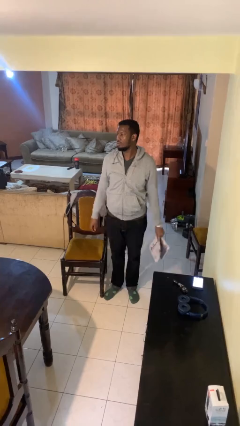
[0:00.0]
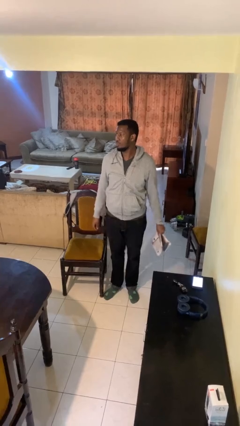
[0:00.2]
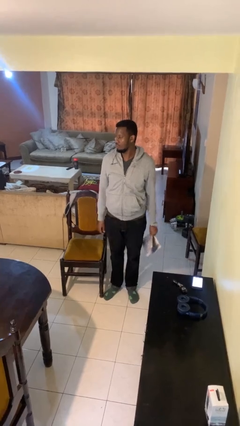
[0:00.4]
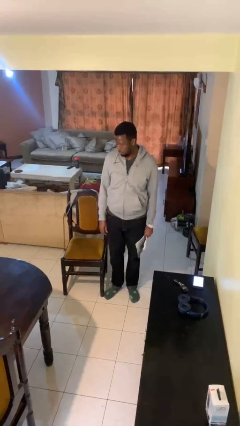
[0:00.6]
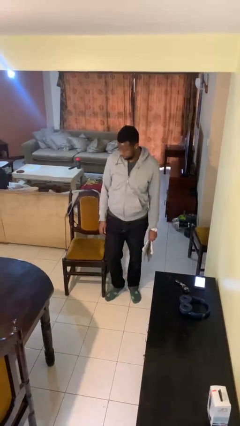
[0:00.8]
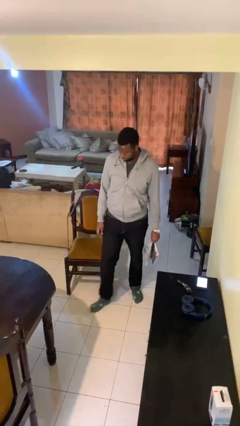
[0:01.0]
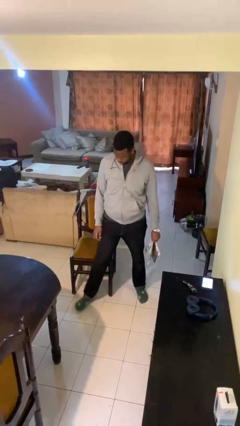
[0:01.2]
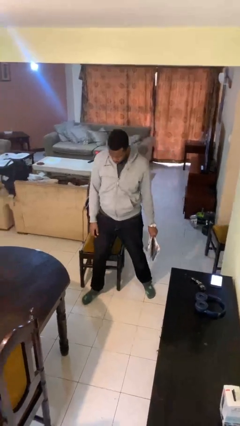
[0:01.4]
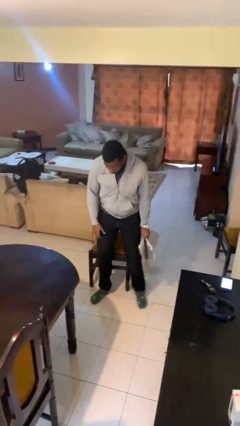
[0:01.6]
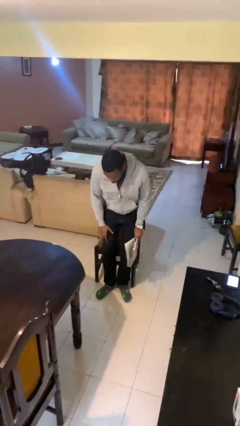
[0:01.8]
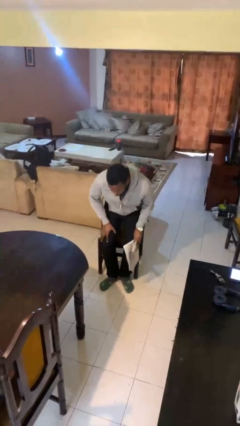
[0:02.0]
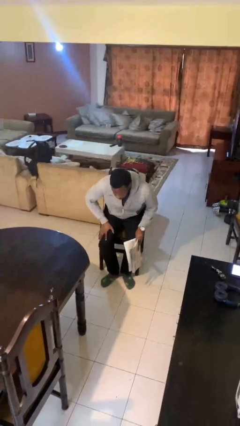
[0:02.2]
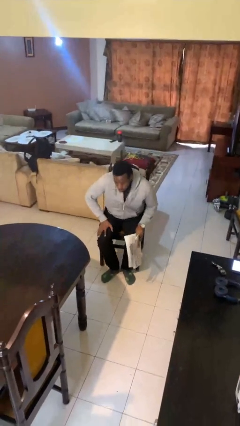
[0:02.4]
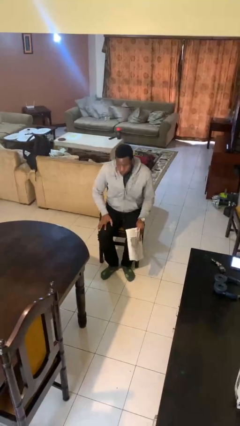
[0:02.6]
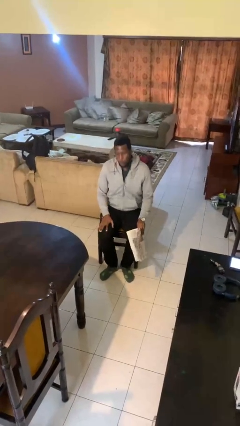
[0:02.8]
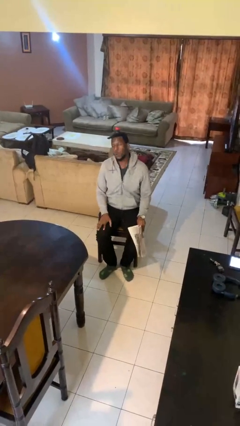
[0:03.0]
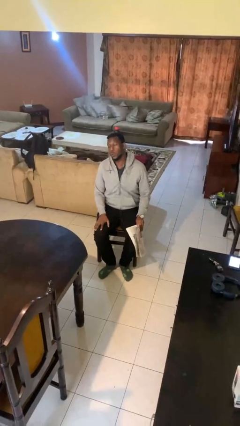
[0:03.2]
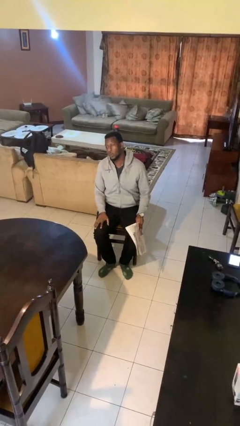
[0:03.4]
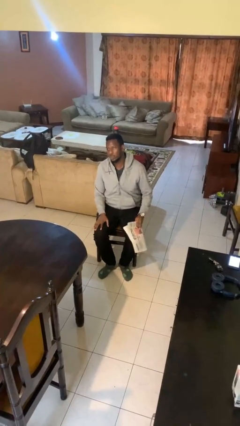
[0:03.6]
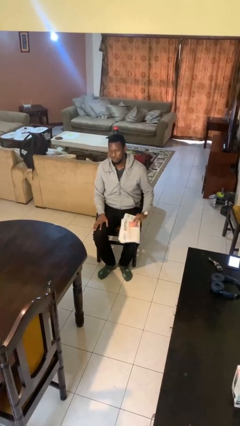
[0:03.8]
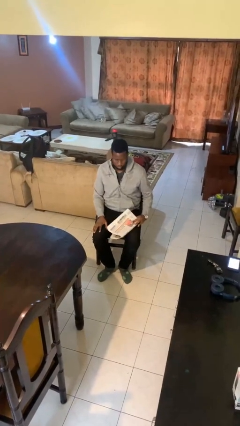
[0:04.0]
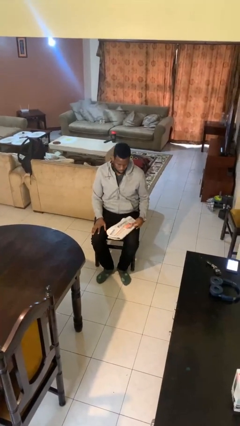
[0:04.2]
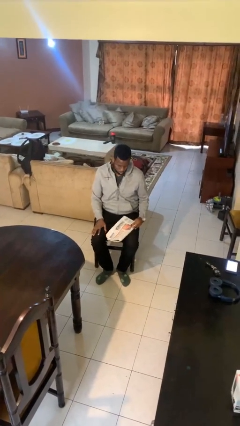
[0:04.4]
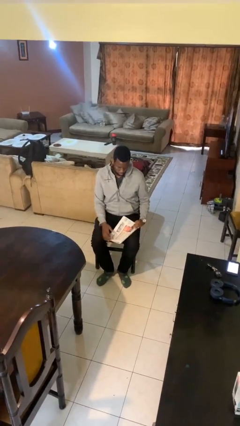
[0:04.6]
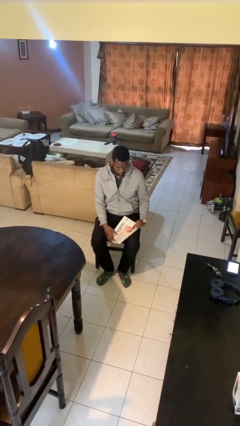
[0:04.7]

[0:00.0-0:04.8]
person sits down

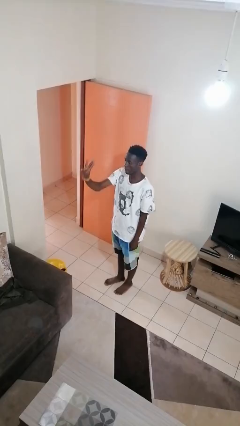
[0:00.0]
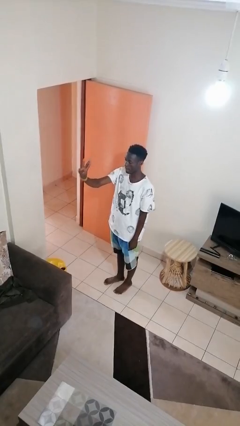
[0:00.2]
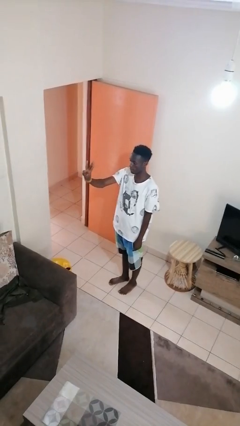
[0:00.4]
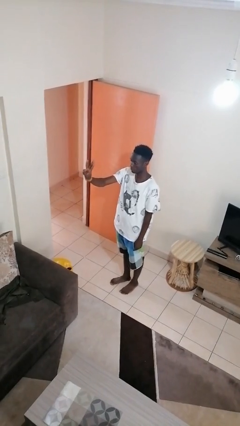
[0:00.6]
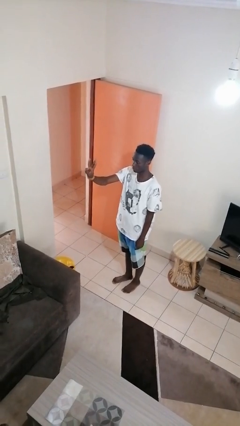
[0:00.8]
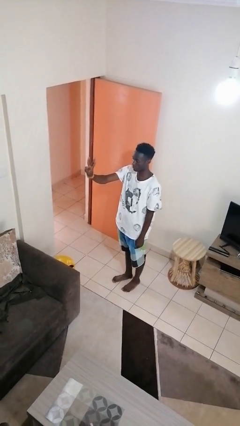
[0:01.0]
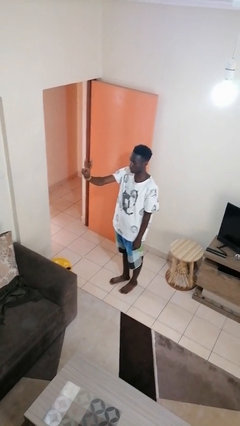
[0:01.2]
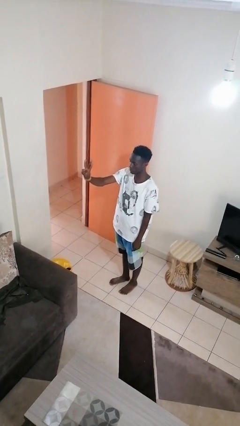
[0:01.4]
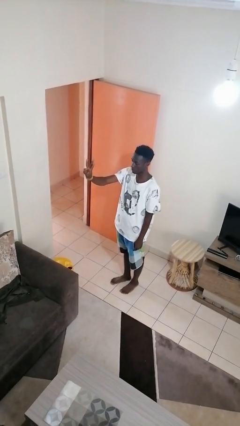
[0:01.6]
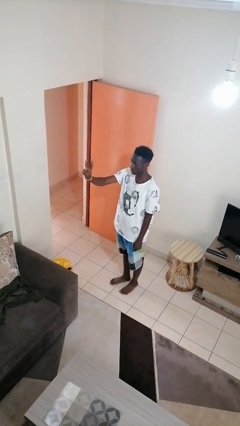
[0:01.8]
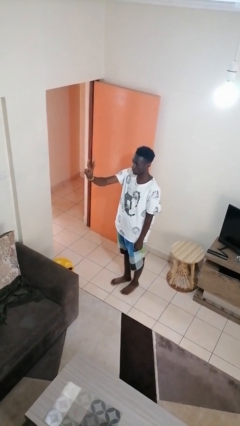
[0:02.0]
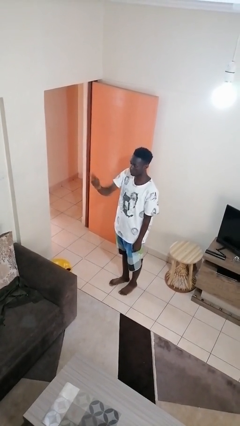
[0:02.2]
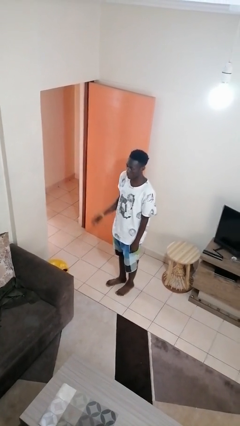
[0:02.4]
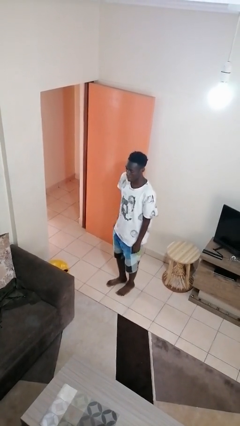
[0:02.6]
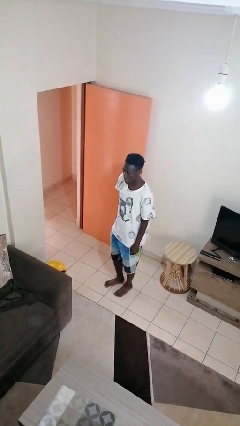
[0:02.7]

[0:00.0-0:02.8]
person gestures number three

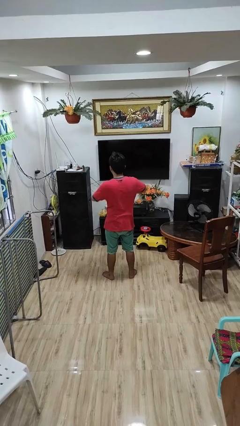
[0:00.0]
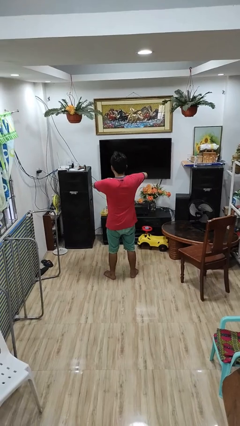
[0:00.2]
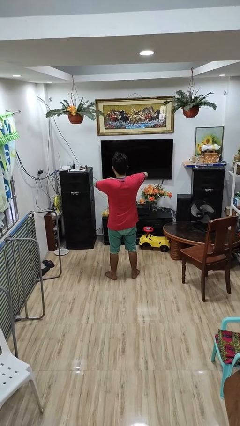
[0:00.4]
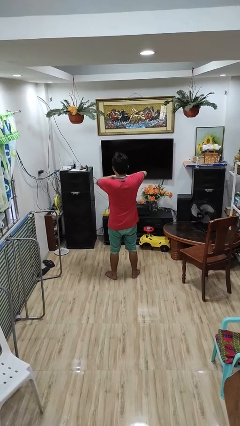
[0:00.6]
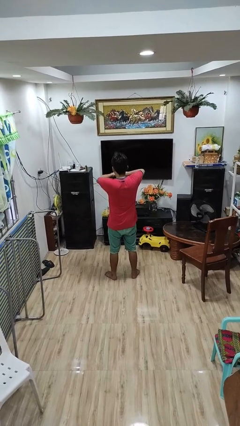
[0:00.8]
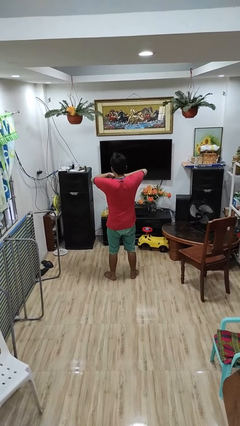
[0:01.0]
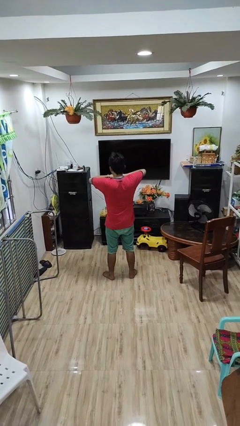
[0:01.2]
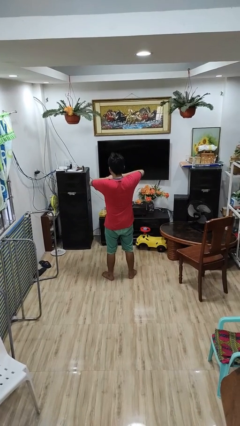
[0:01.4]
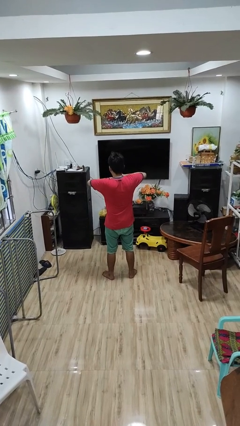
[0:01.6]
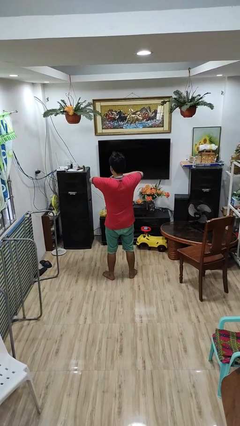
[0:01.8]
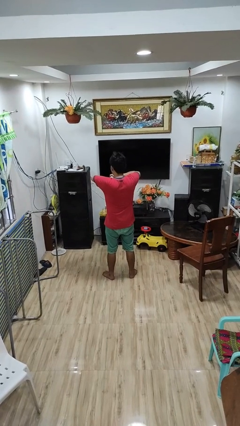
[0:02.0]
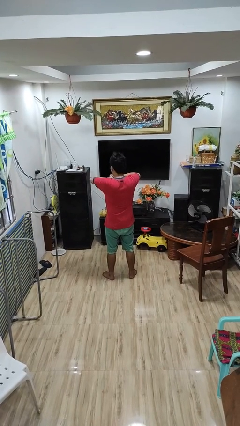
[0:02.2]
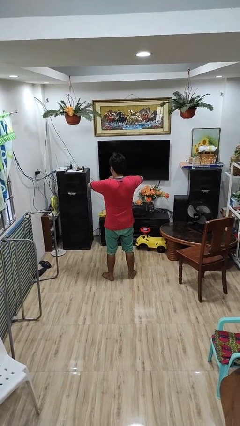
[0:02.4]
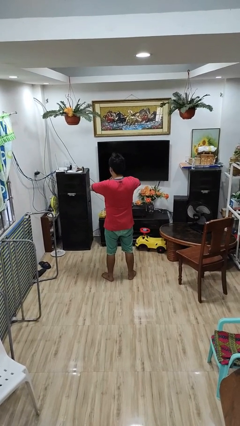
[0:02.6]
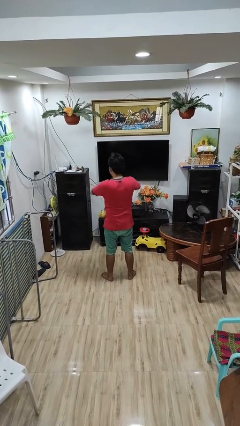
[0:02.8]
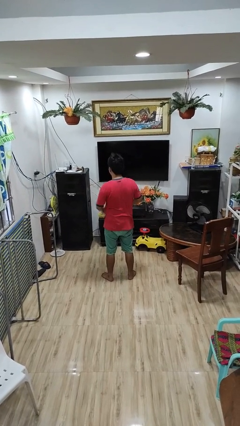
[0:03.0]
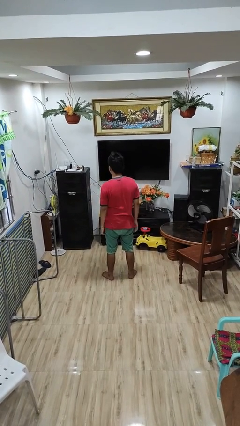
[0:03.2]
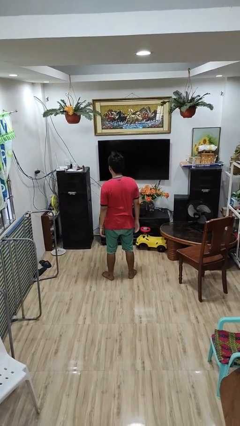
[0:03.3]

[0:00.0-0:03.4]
person cracks knuckles

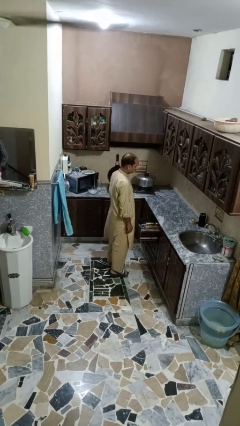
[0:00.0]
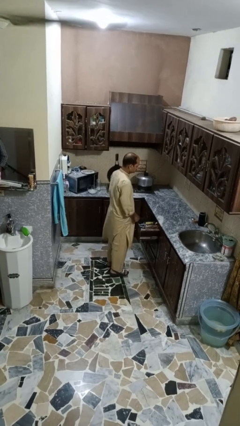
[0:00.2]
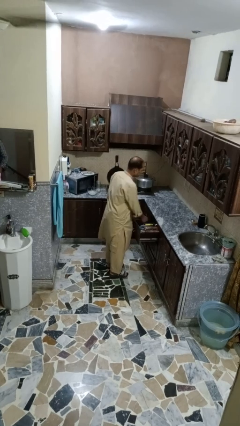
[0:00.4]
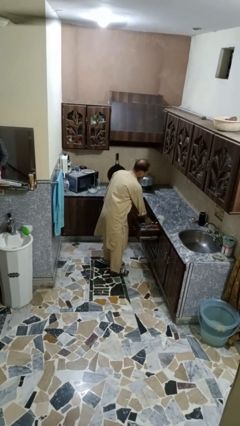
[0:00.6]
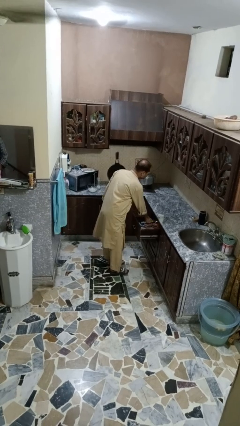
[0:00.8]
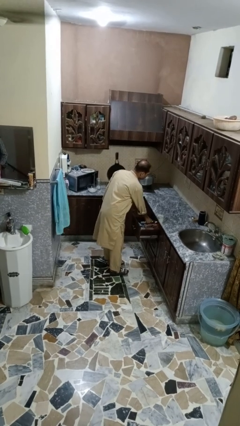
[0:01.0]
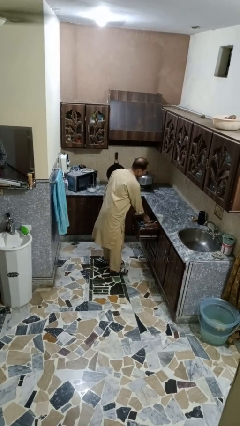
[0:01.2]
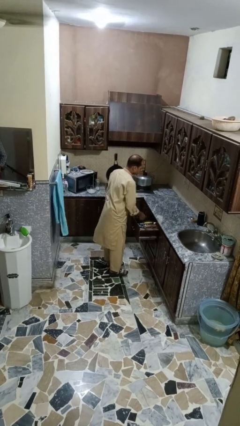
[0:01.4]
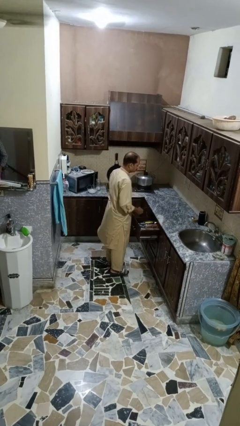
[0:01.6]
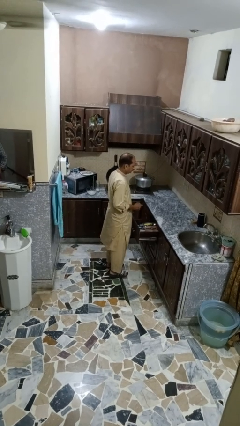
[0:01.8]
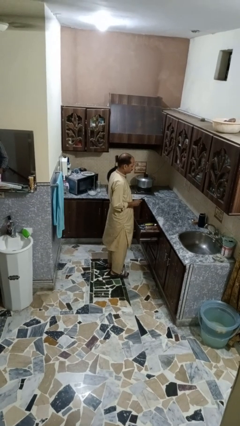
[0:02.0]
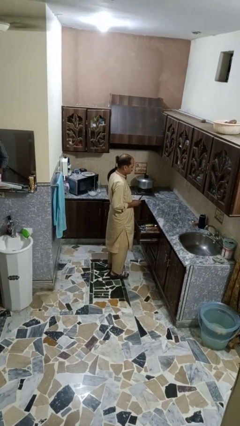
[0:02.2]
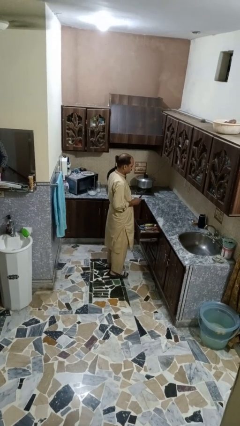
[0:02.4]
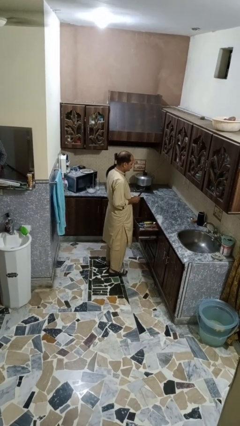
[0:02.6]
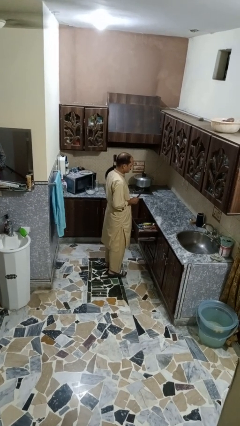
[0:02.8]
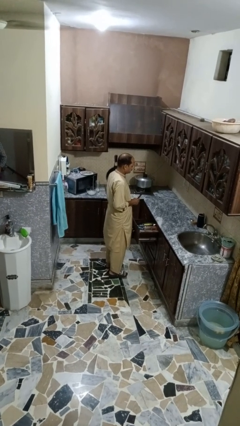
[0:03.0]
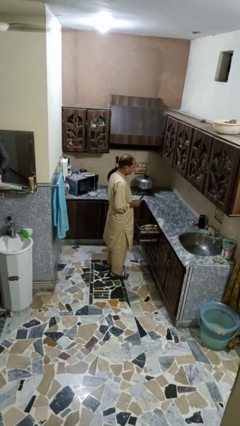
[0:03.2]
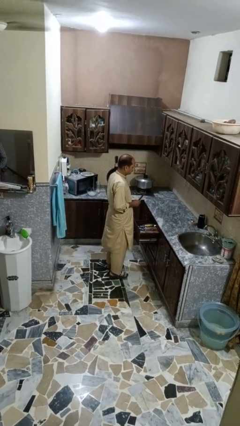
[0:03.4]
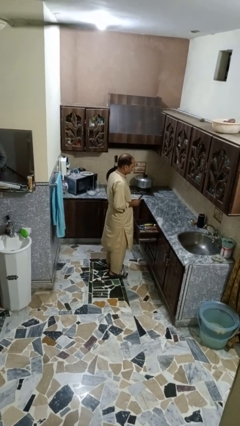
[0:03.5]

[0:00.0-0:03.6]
person takes object from kitchen drawer

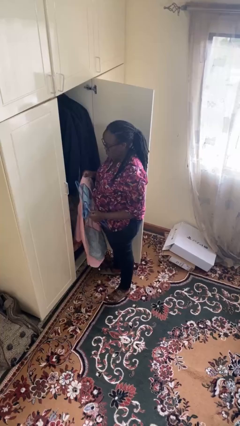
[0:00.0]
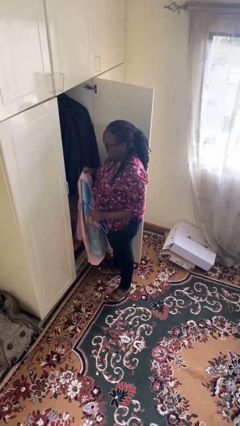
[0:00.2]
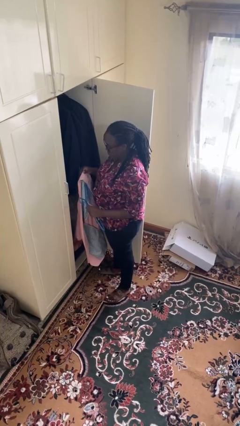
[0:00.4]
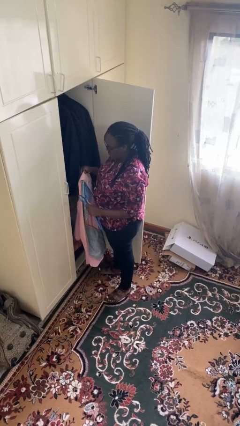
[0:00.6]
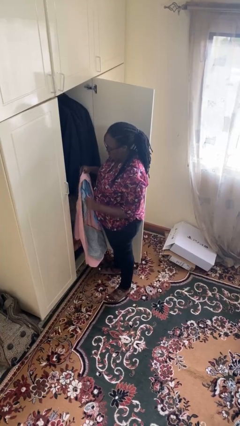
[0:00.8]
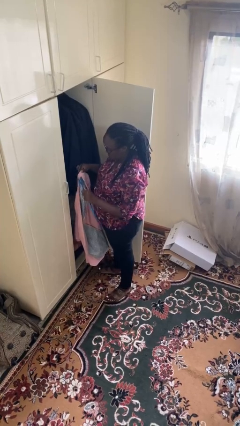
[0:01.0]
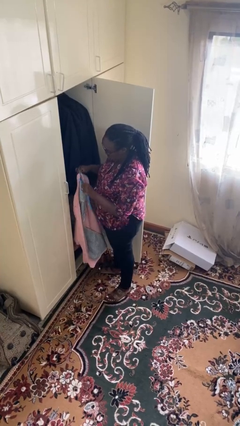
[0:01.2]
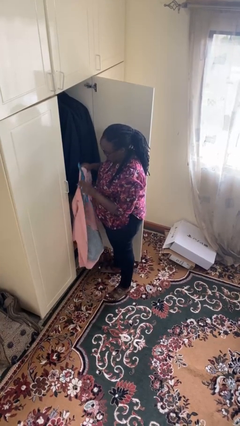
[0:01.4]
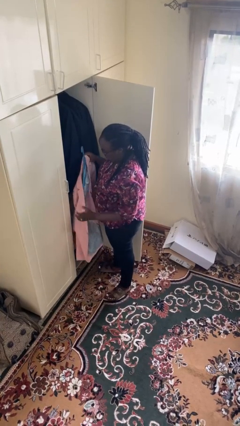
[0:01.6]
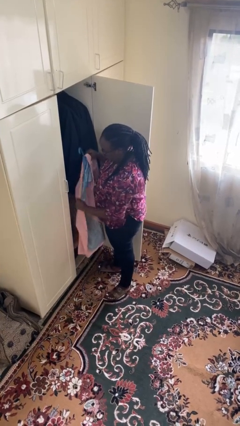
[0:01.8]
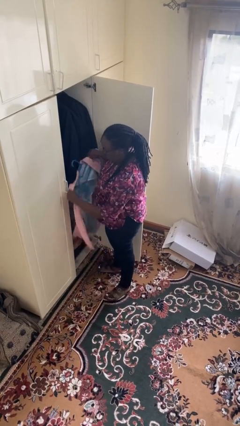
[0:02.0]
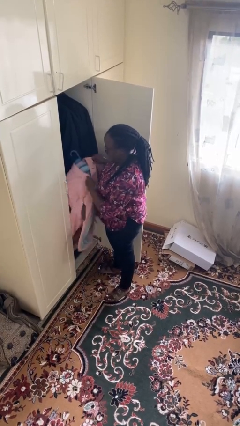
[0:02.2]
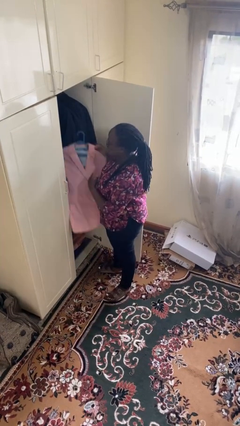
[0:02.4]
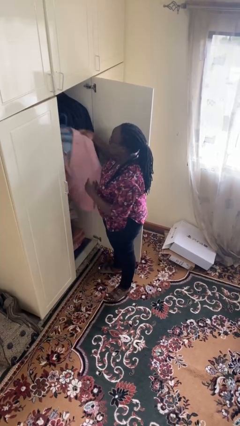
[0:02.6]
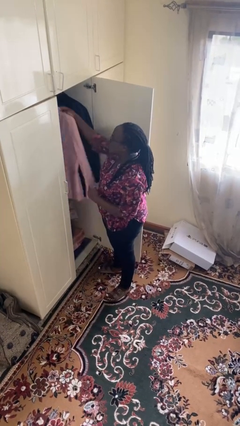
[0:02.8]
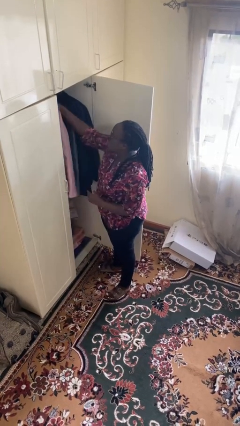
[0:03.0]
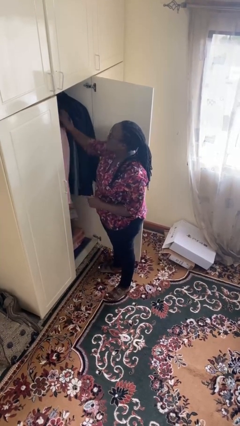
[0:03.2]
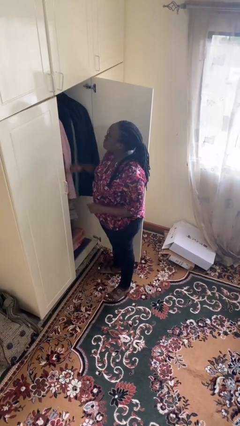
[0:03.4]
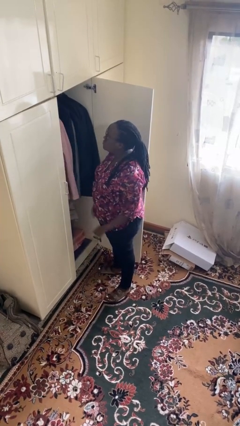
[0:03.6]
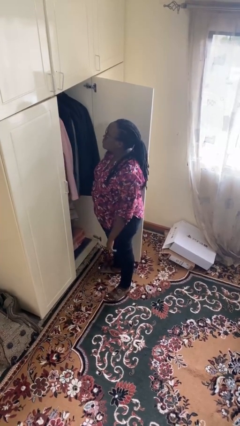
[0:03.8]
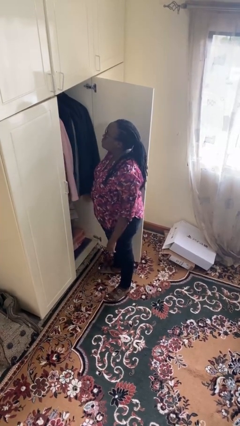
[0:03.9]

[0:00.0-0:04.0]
person puts clothes into closet
